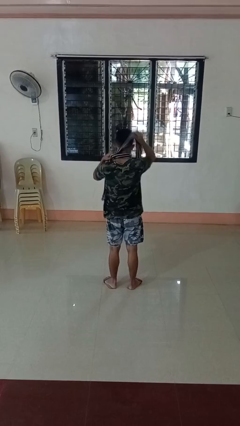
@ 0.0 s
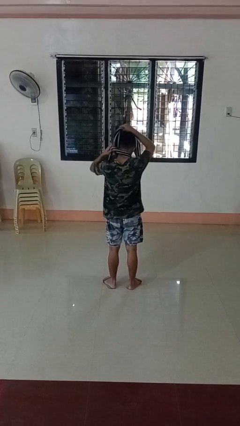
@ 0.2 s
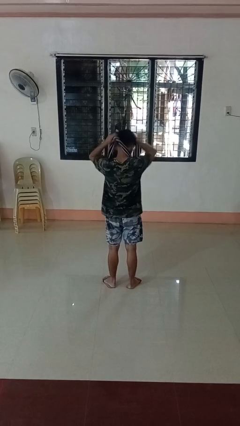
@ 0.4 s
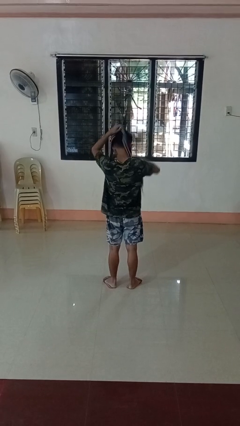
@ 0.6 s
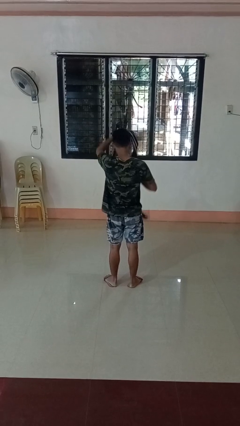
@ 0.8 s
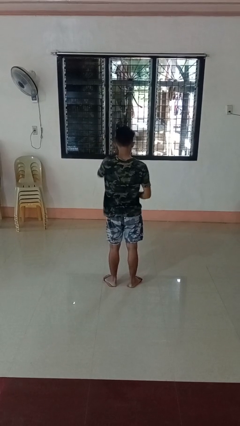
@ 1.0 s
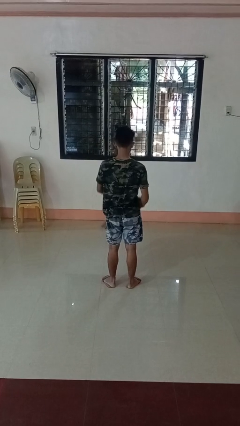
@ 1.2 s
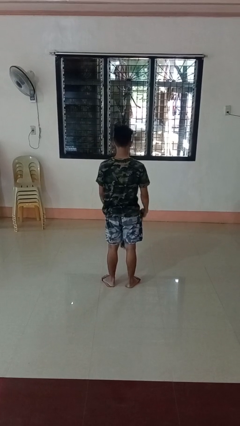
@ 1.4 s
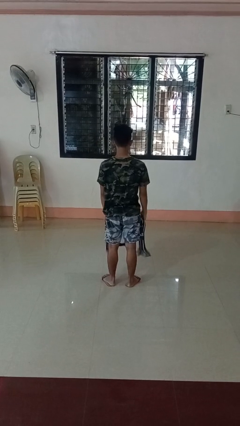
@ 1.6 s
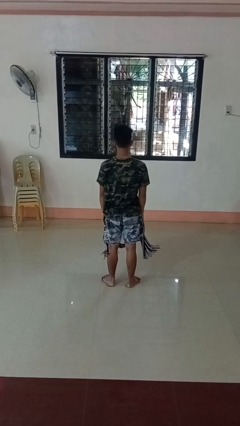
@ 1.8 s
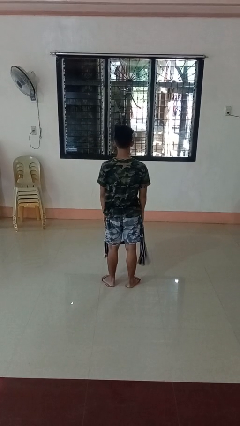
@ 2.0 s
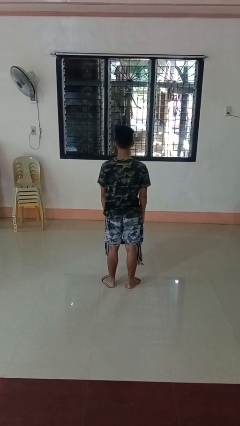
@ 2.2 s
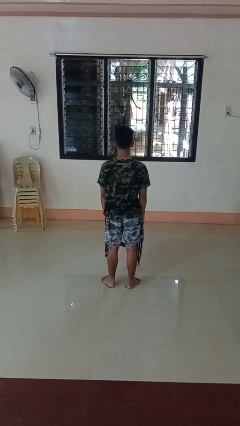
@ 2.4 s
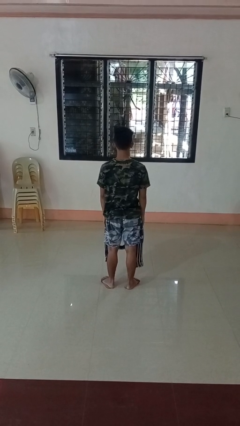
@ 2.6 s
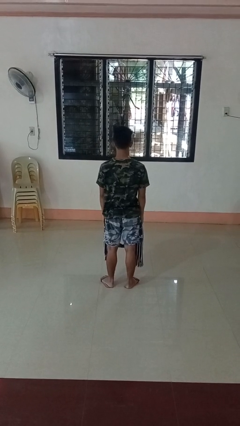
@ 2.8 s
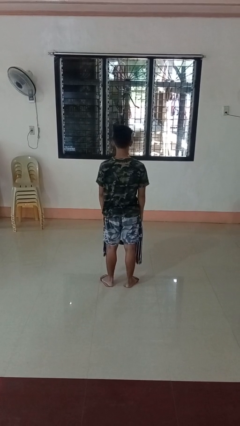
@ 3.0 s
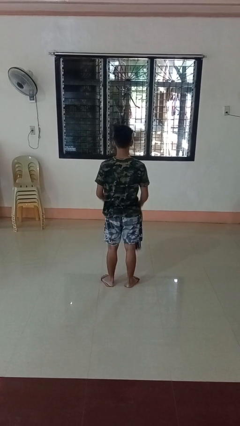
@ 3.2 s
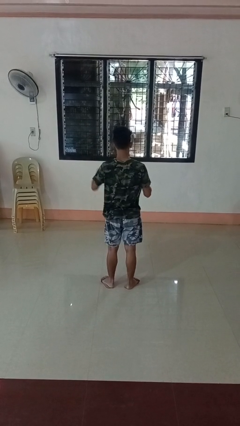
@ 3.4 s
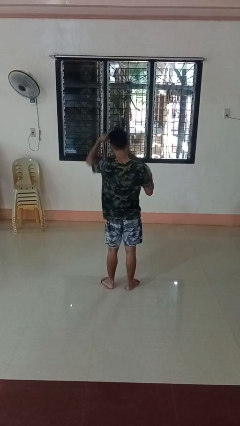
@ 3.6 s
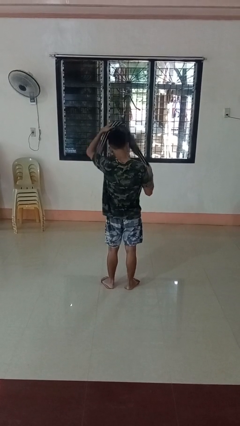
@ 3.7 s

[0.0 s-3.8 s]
person takes off scarf

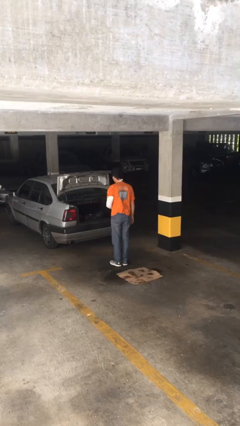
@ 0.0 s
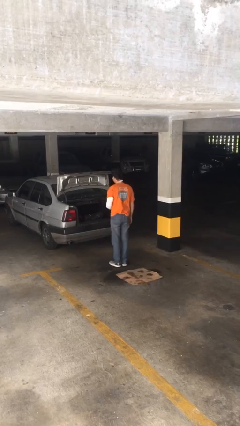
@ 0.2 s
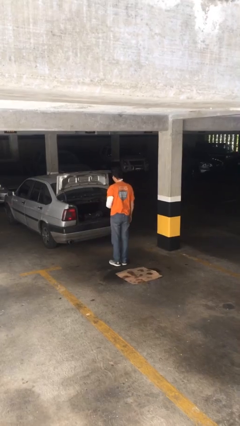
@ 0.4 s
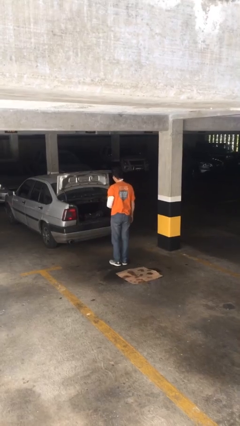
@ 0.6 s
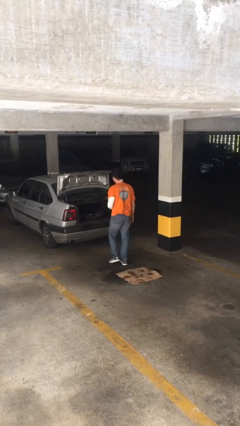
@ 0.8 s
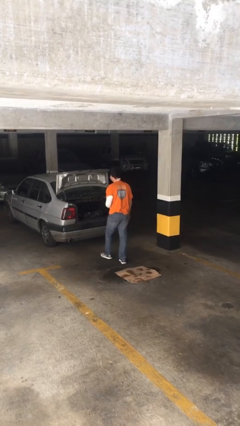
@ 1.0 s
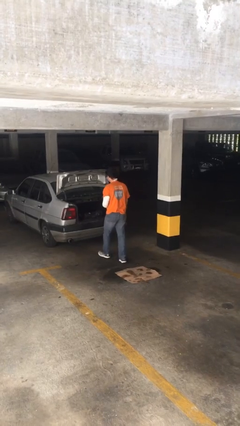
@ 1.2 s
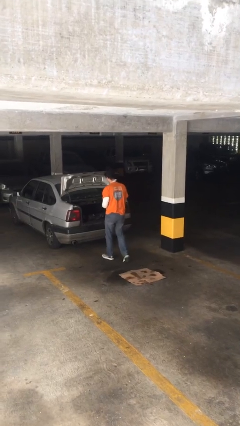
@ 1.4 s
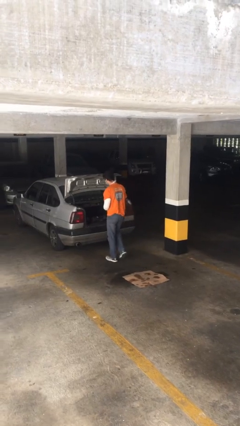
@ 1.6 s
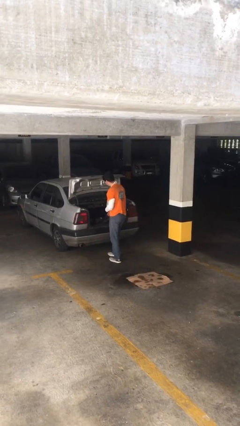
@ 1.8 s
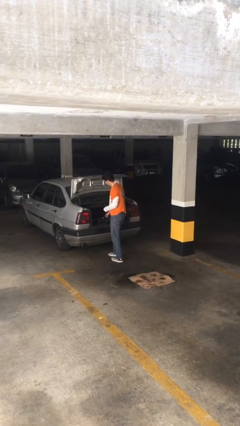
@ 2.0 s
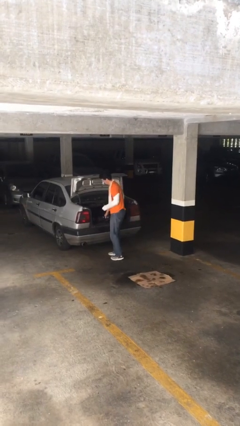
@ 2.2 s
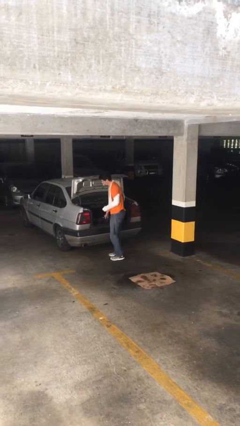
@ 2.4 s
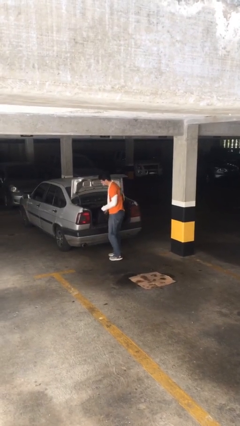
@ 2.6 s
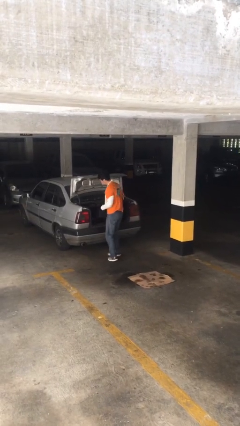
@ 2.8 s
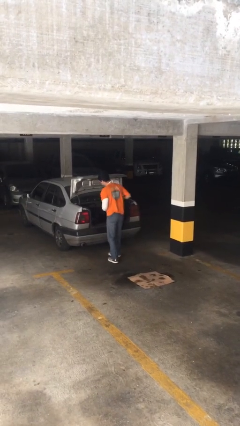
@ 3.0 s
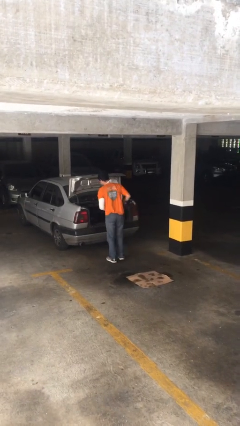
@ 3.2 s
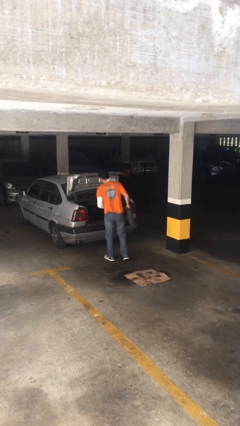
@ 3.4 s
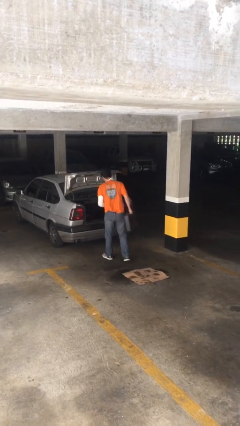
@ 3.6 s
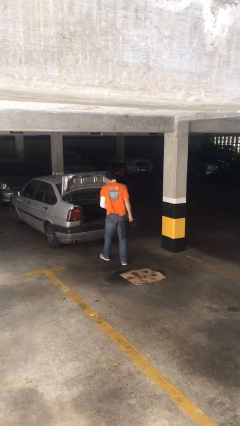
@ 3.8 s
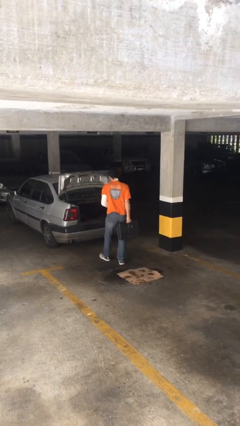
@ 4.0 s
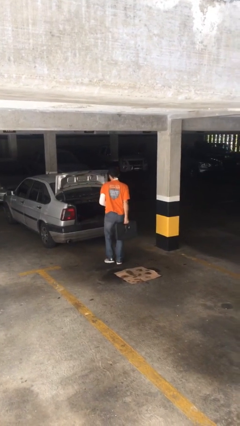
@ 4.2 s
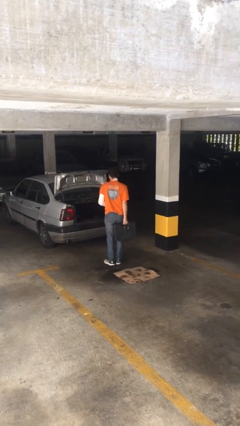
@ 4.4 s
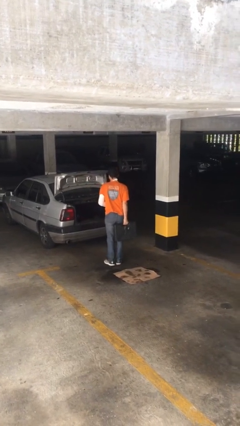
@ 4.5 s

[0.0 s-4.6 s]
person unloads car

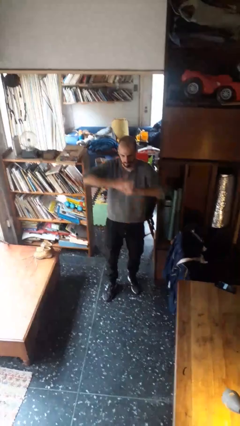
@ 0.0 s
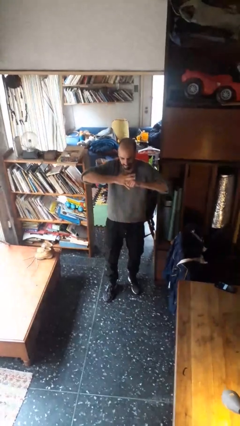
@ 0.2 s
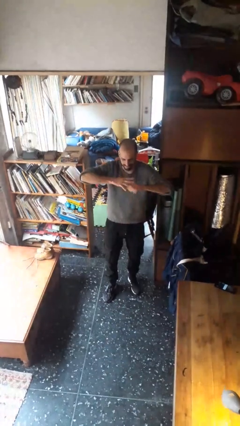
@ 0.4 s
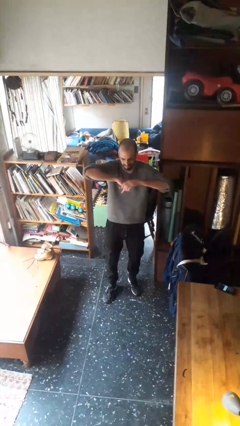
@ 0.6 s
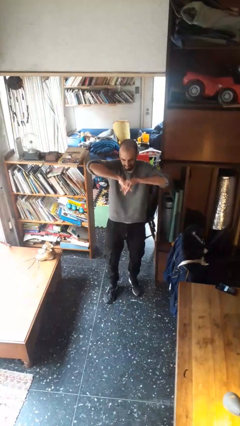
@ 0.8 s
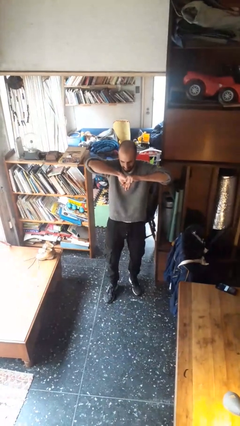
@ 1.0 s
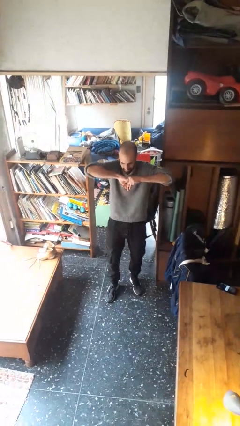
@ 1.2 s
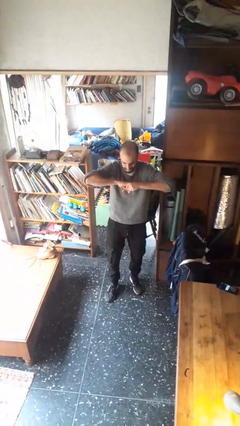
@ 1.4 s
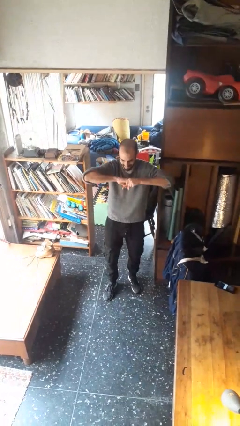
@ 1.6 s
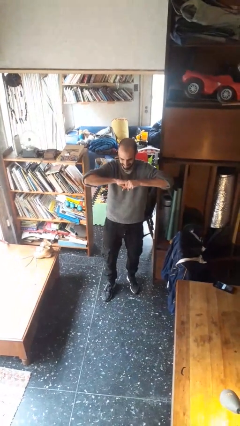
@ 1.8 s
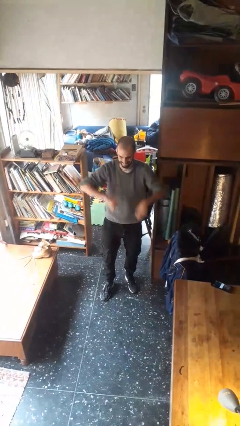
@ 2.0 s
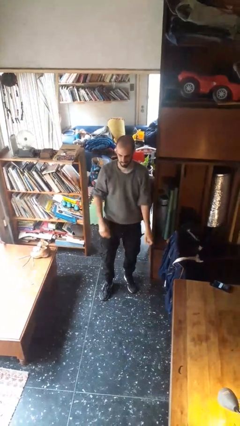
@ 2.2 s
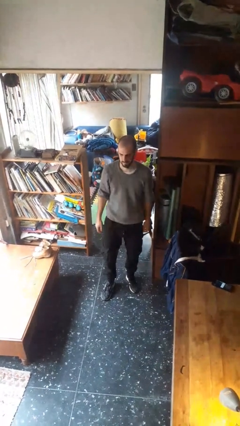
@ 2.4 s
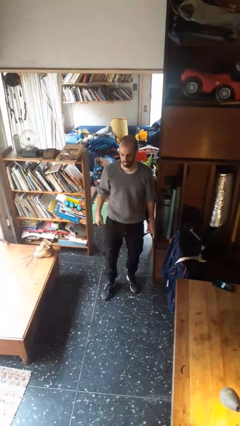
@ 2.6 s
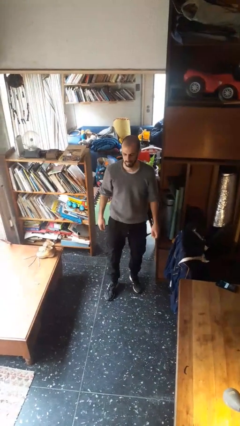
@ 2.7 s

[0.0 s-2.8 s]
person cracks knuckles

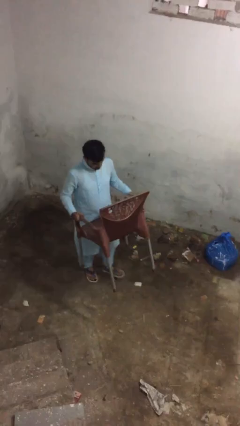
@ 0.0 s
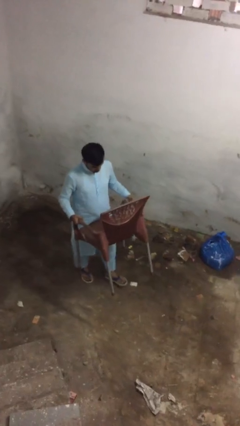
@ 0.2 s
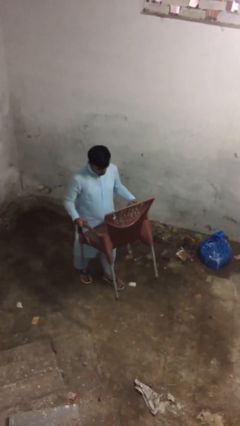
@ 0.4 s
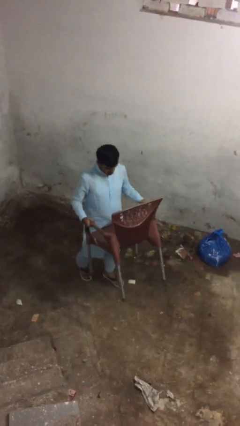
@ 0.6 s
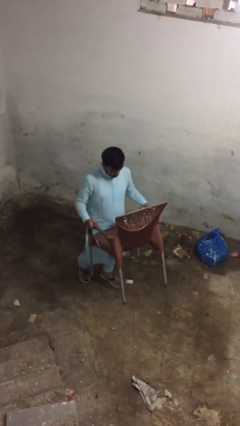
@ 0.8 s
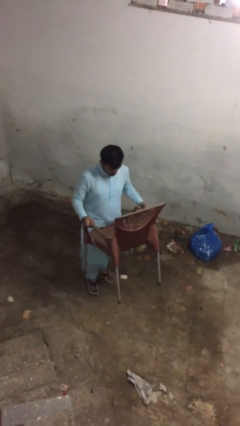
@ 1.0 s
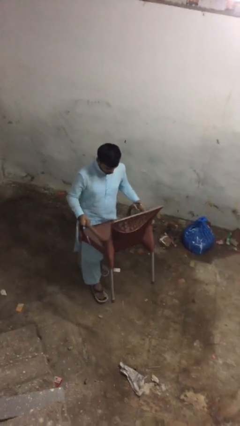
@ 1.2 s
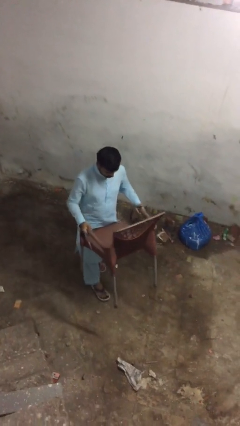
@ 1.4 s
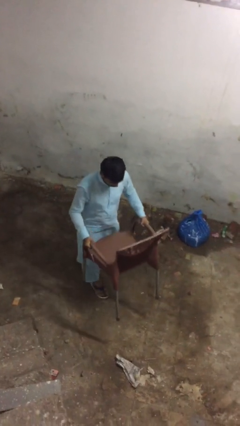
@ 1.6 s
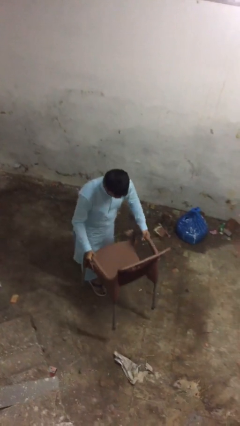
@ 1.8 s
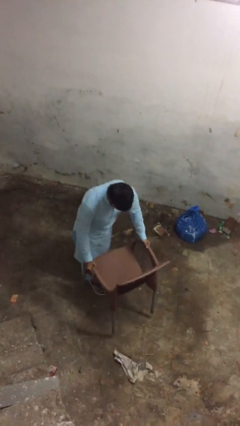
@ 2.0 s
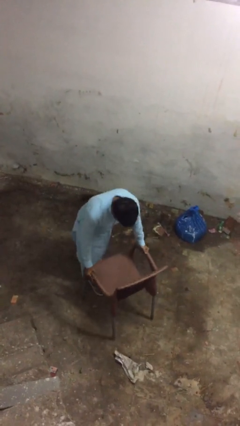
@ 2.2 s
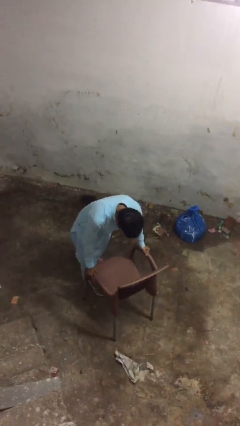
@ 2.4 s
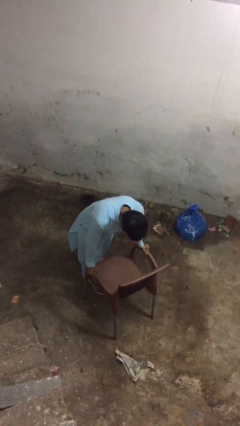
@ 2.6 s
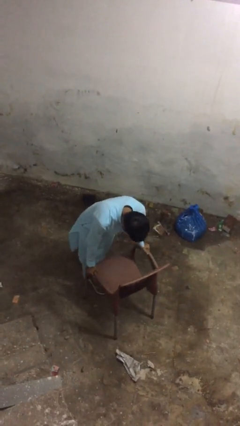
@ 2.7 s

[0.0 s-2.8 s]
person puts down object on floor

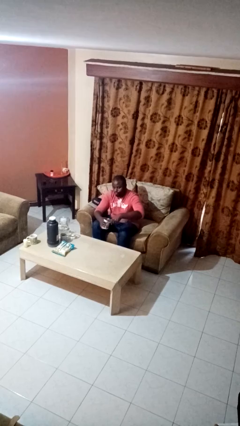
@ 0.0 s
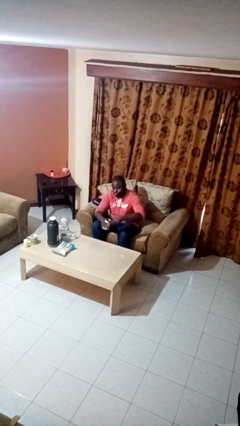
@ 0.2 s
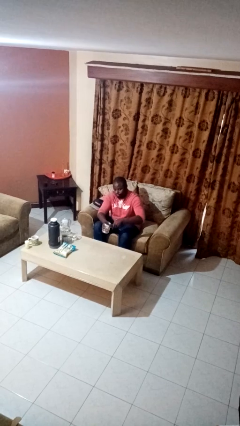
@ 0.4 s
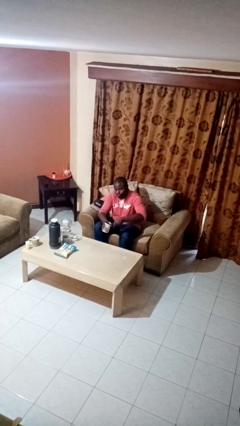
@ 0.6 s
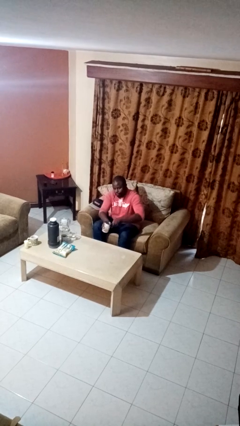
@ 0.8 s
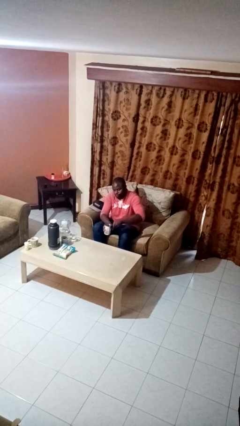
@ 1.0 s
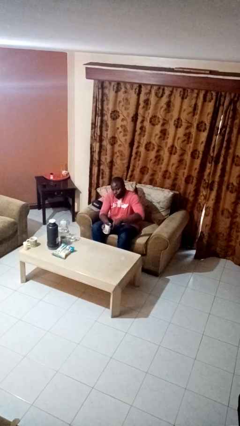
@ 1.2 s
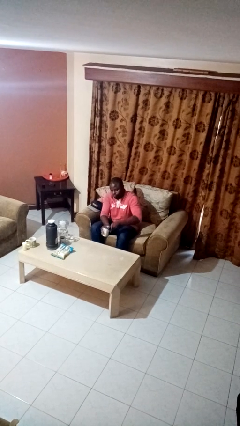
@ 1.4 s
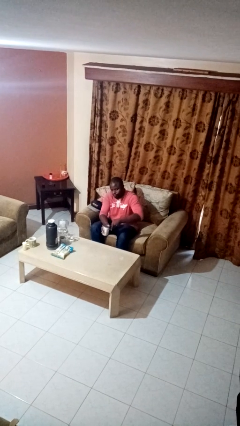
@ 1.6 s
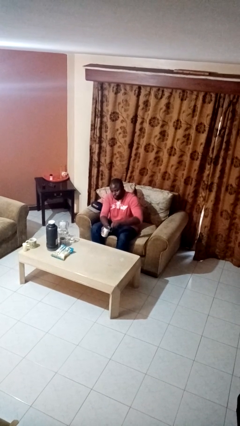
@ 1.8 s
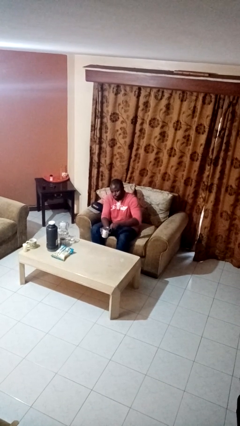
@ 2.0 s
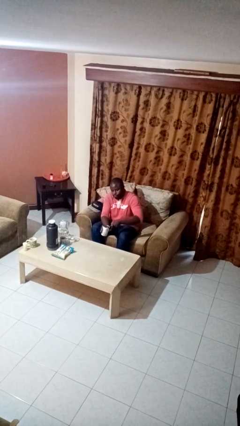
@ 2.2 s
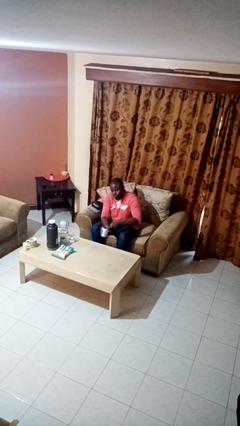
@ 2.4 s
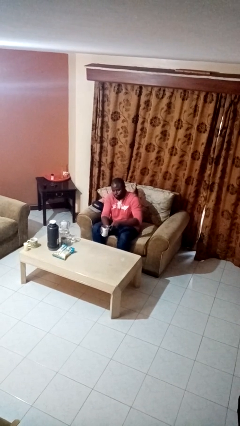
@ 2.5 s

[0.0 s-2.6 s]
person opens can with can opener

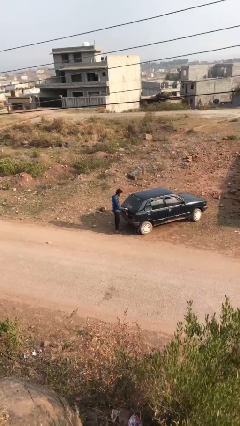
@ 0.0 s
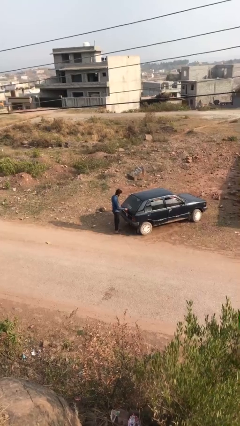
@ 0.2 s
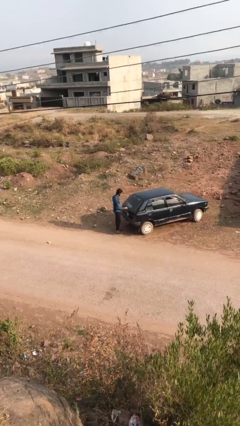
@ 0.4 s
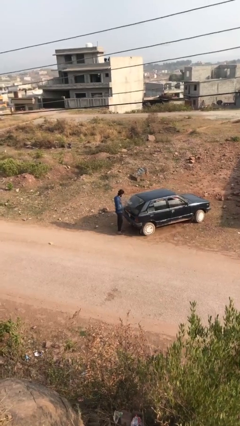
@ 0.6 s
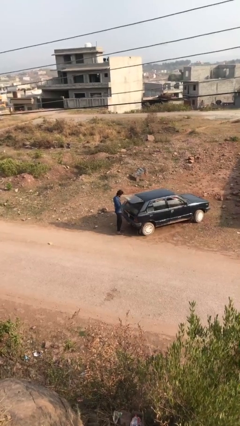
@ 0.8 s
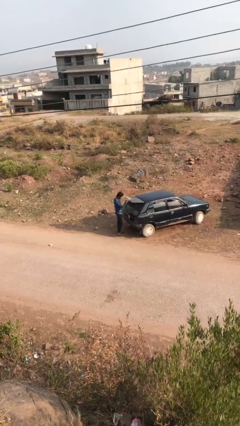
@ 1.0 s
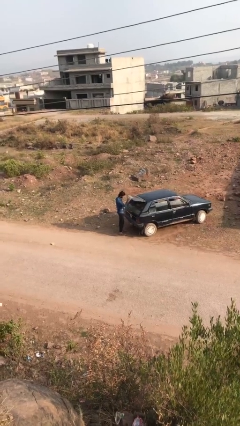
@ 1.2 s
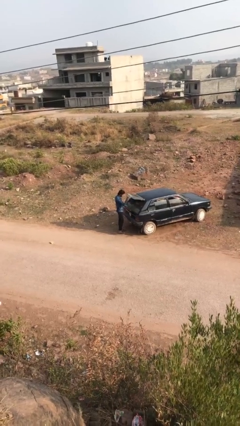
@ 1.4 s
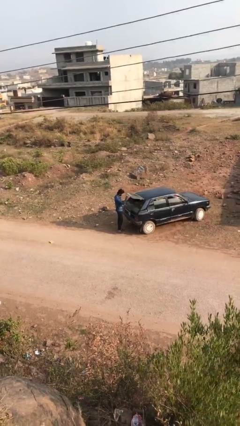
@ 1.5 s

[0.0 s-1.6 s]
person opens car trunk
